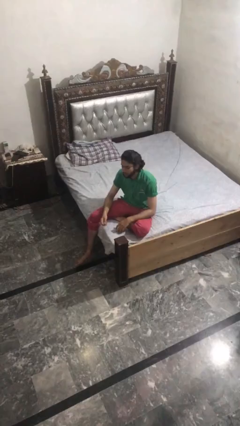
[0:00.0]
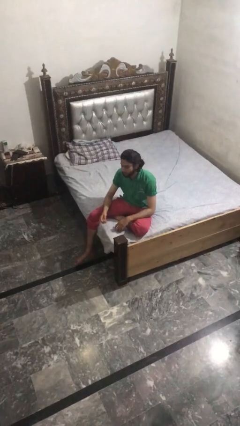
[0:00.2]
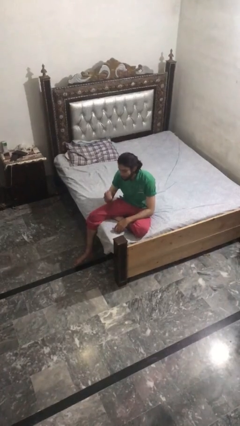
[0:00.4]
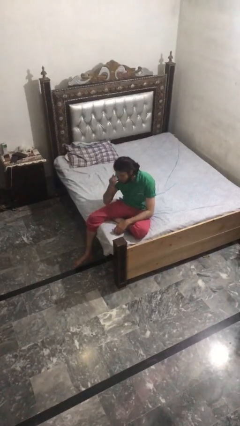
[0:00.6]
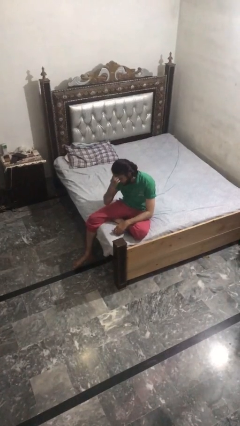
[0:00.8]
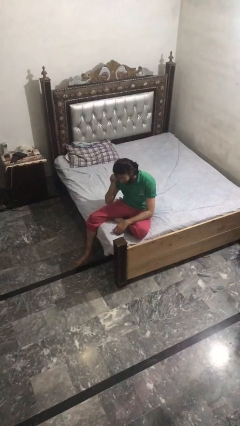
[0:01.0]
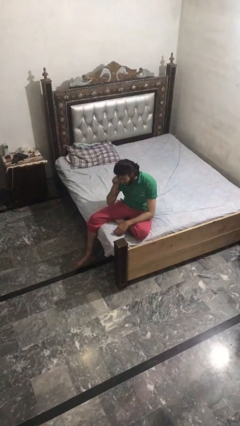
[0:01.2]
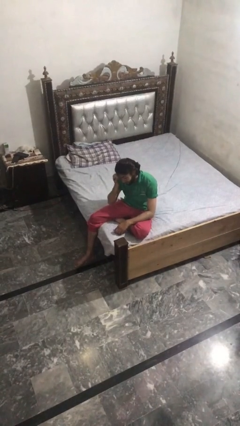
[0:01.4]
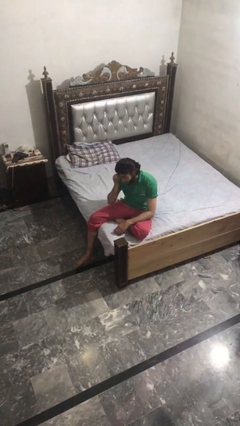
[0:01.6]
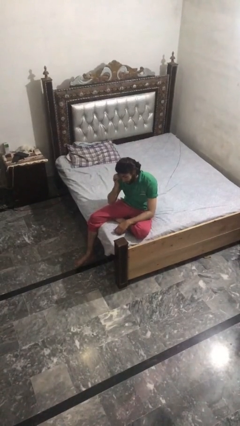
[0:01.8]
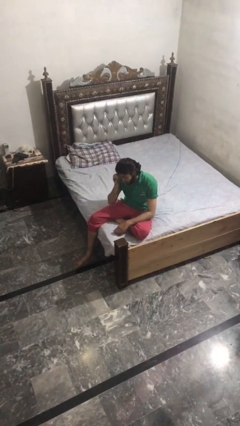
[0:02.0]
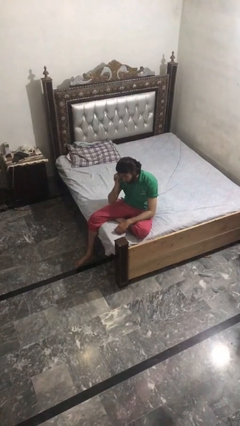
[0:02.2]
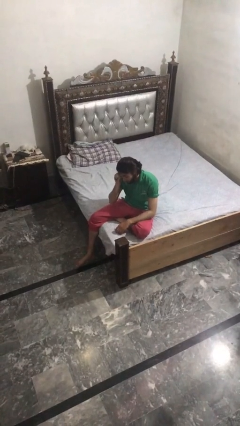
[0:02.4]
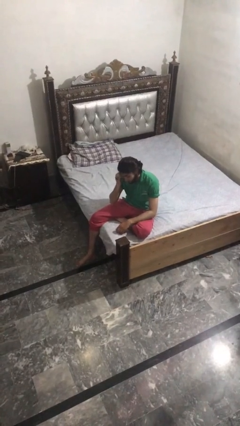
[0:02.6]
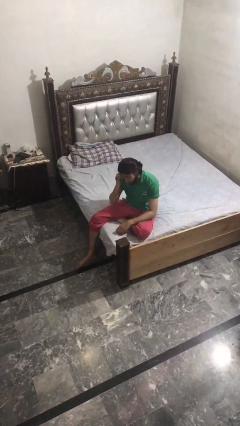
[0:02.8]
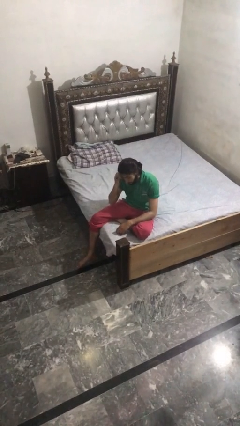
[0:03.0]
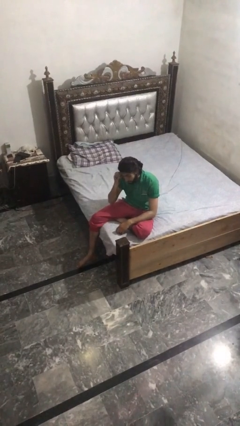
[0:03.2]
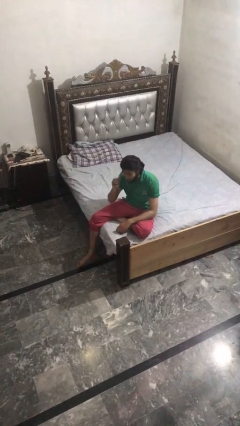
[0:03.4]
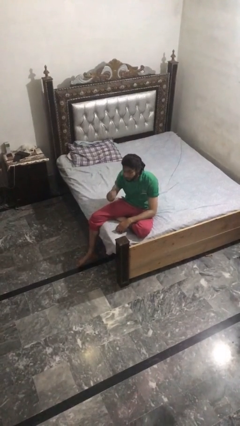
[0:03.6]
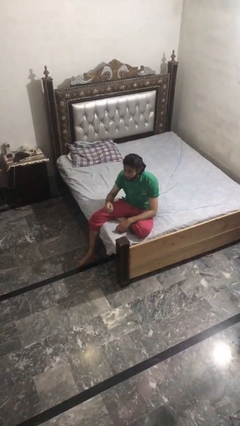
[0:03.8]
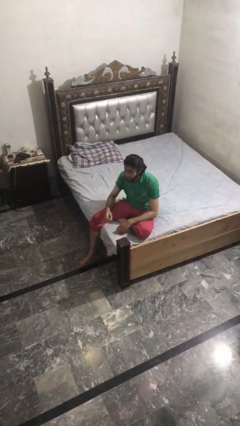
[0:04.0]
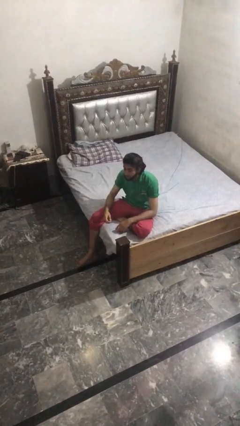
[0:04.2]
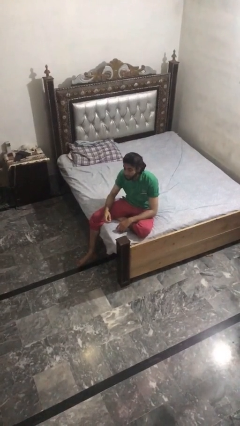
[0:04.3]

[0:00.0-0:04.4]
person scratches face

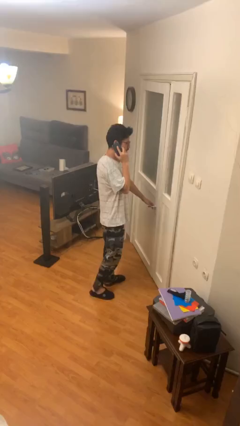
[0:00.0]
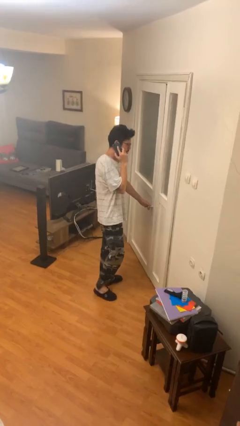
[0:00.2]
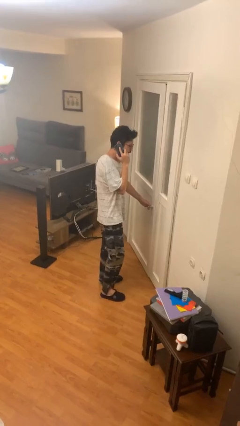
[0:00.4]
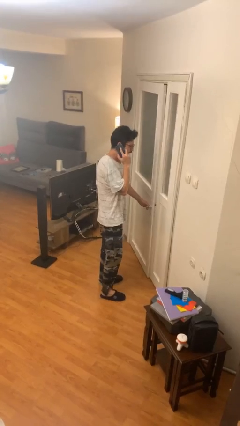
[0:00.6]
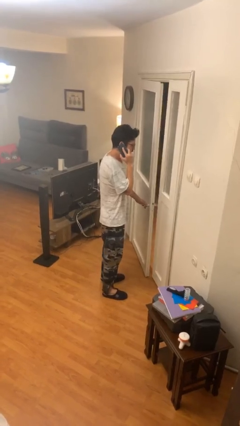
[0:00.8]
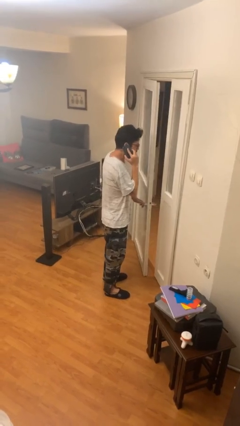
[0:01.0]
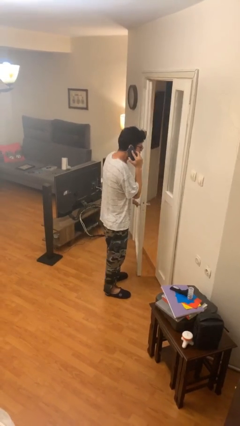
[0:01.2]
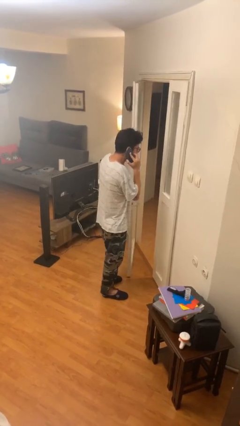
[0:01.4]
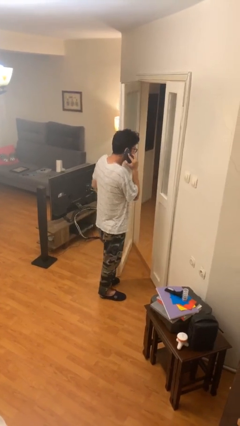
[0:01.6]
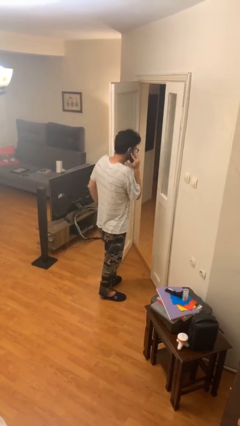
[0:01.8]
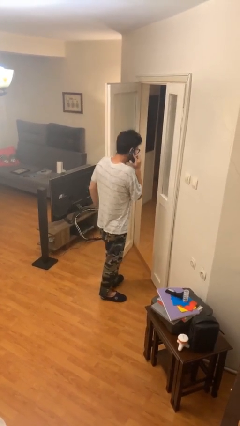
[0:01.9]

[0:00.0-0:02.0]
person opens facility door

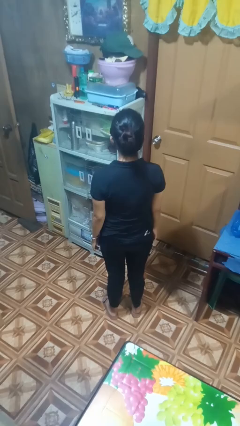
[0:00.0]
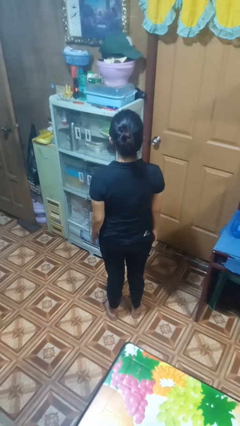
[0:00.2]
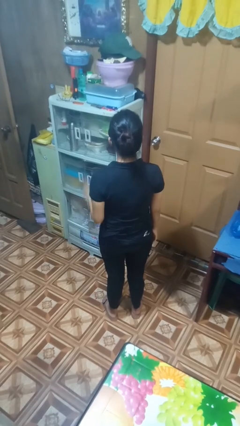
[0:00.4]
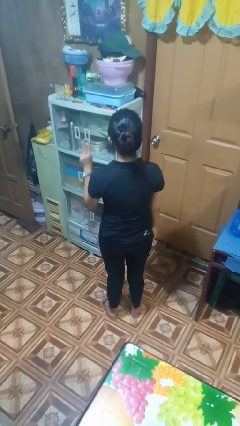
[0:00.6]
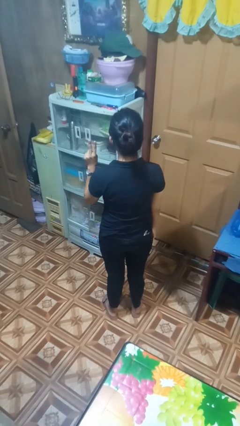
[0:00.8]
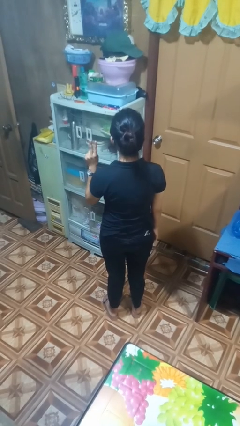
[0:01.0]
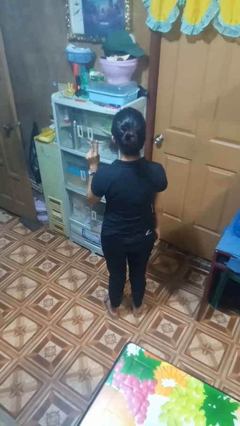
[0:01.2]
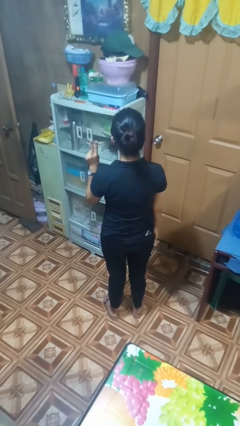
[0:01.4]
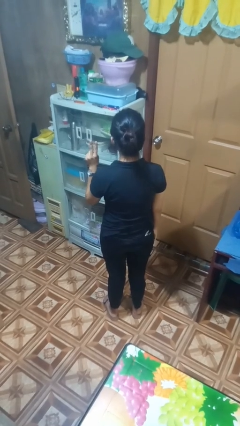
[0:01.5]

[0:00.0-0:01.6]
person gestures peace

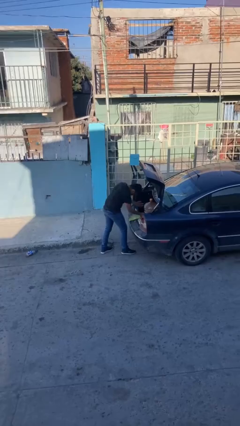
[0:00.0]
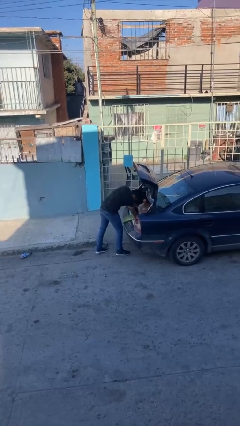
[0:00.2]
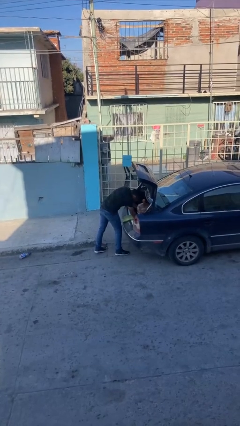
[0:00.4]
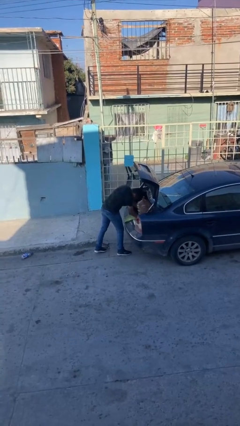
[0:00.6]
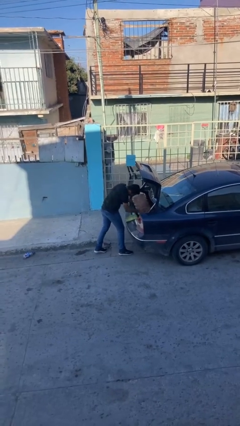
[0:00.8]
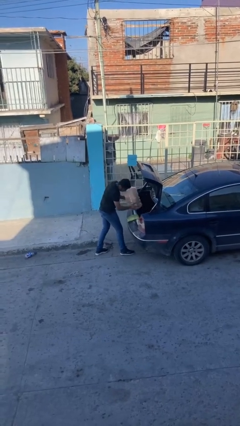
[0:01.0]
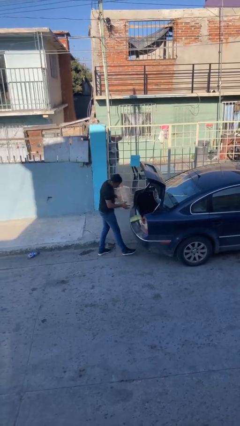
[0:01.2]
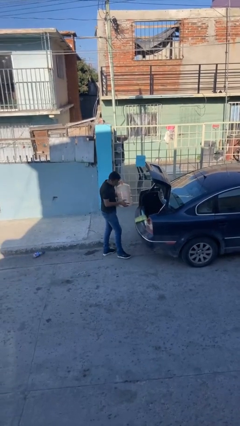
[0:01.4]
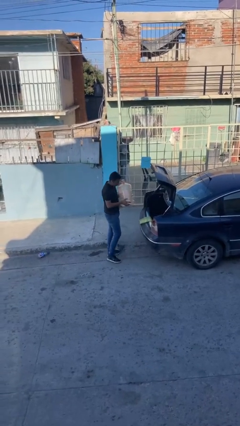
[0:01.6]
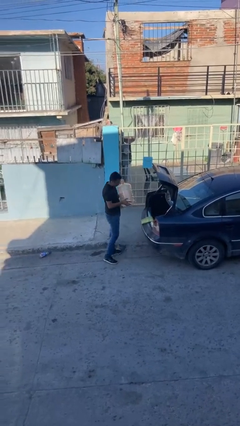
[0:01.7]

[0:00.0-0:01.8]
person unloads car

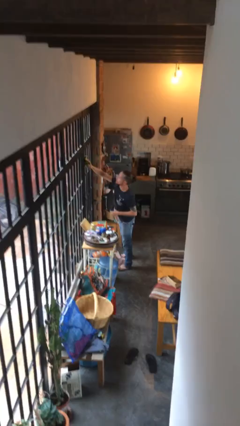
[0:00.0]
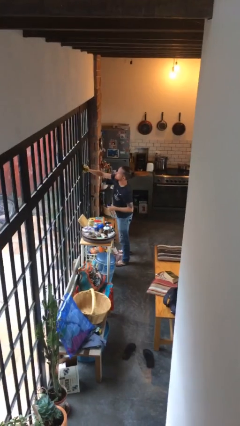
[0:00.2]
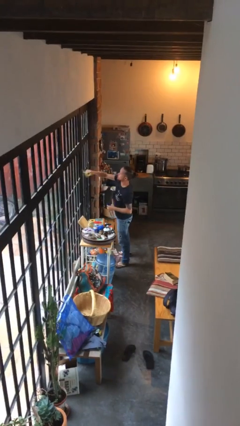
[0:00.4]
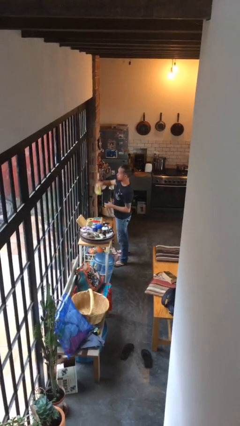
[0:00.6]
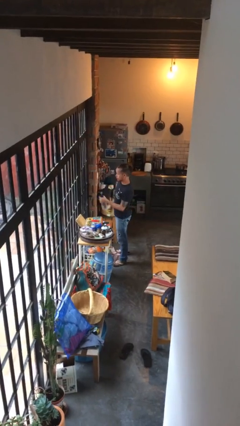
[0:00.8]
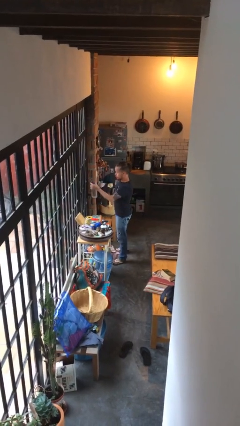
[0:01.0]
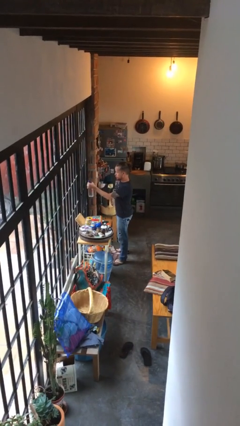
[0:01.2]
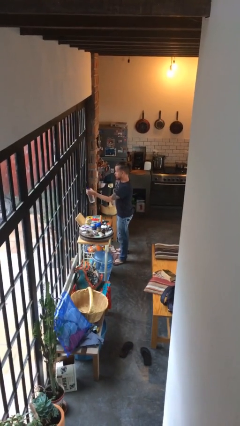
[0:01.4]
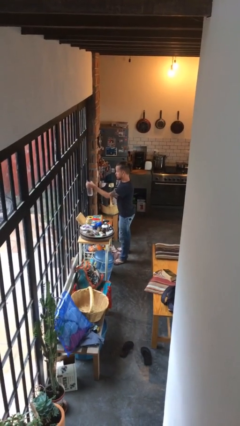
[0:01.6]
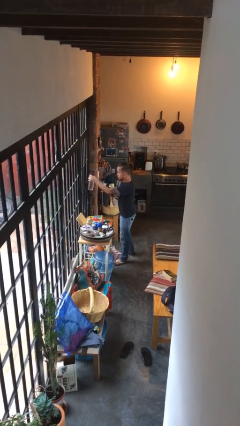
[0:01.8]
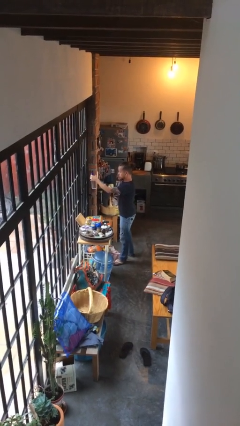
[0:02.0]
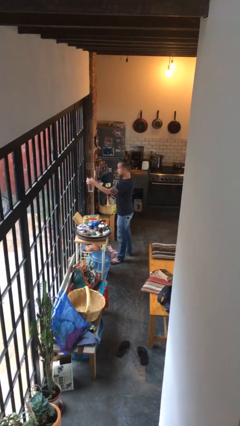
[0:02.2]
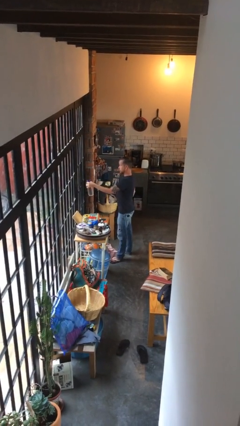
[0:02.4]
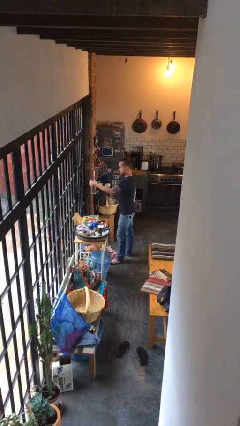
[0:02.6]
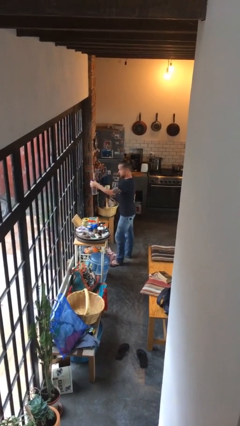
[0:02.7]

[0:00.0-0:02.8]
person sprays from bottle

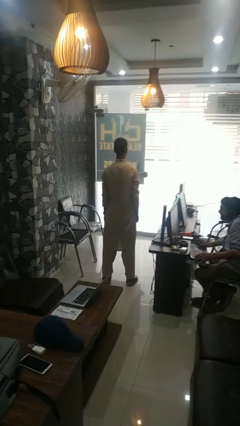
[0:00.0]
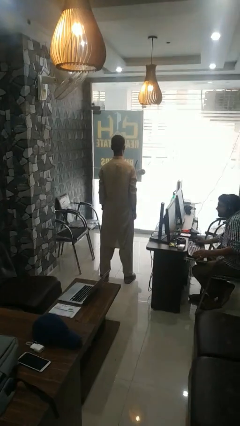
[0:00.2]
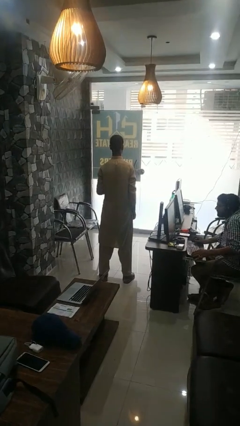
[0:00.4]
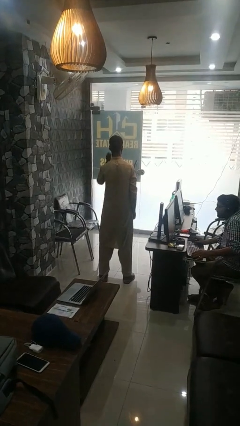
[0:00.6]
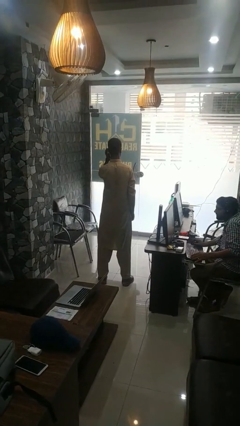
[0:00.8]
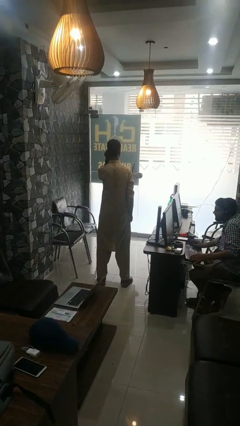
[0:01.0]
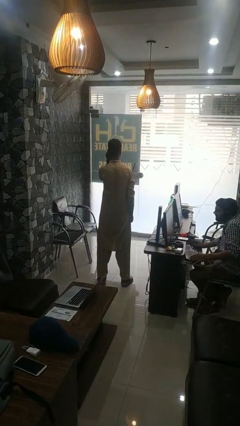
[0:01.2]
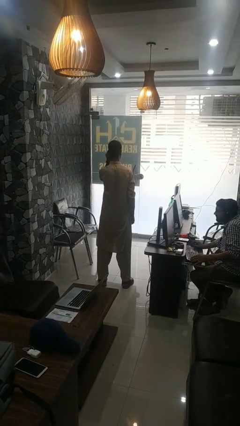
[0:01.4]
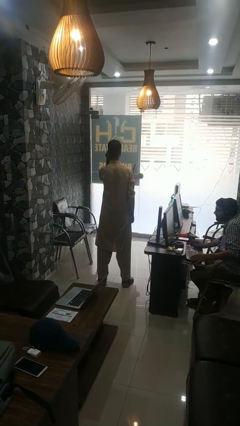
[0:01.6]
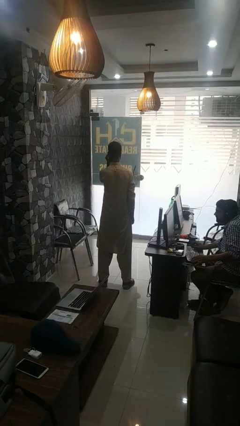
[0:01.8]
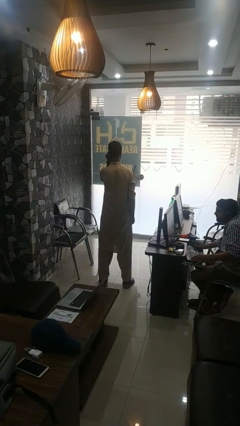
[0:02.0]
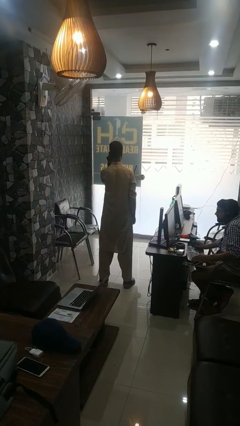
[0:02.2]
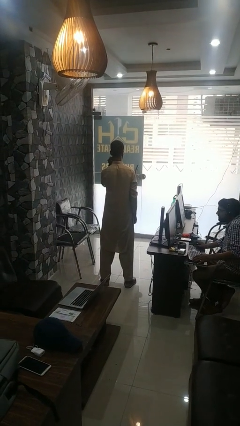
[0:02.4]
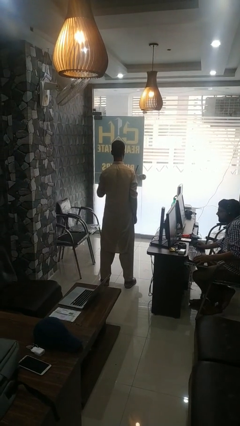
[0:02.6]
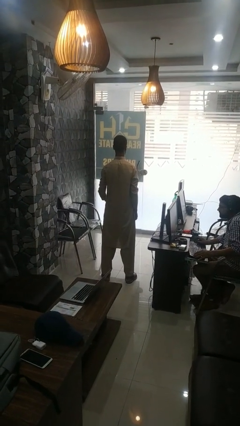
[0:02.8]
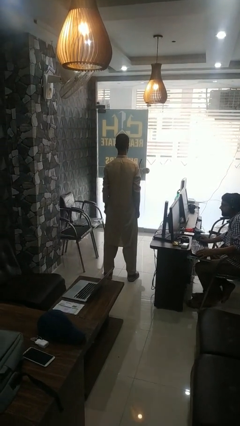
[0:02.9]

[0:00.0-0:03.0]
person touches earlobe

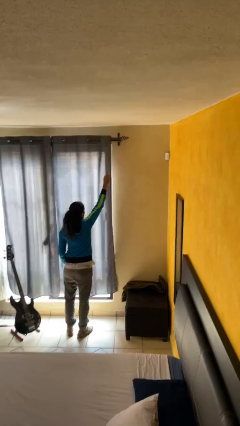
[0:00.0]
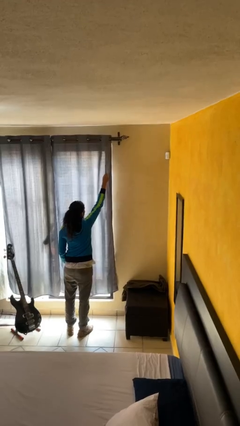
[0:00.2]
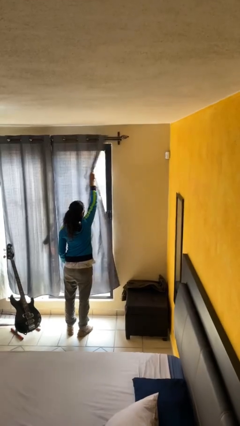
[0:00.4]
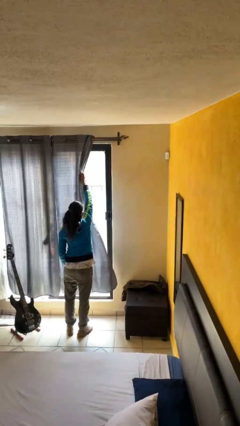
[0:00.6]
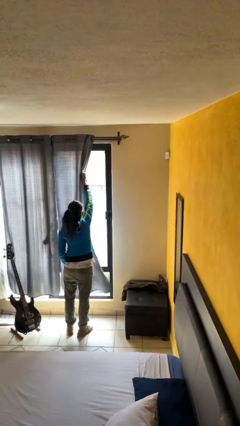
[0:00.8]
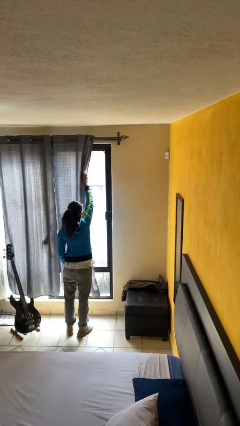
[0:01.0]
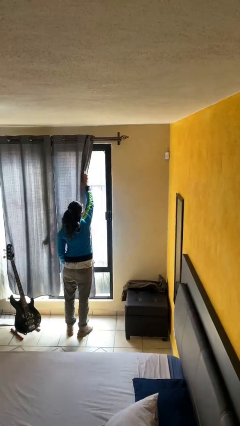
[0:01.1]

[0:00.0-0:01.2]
person opens curtains
